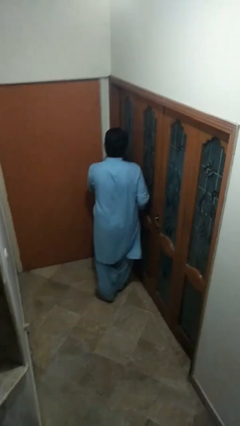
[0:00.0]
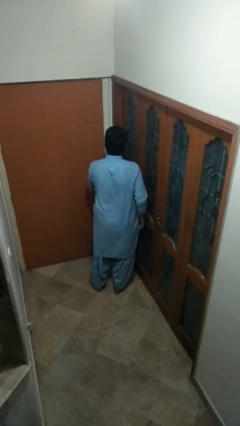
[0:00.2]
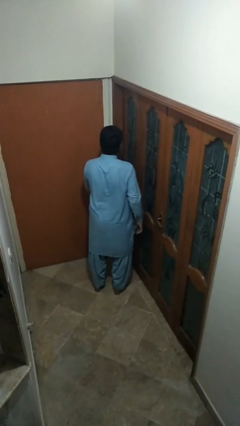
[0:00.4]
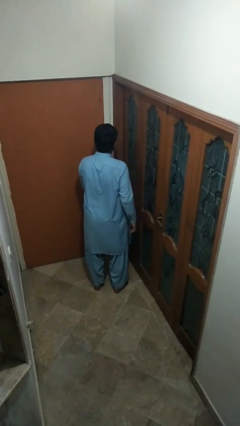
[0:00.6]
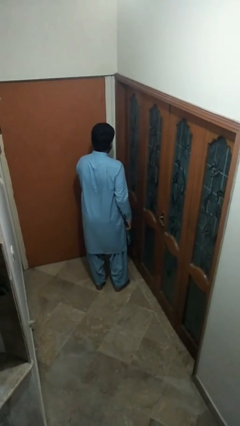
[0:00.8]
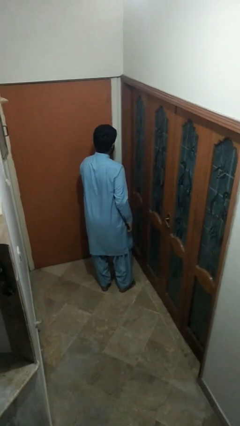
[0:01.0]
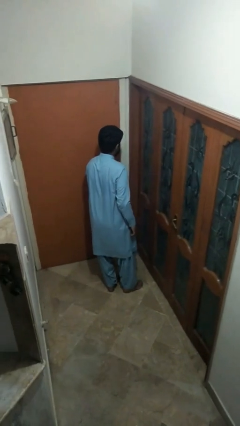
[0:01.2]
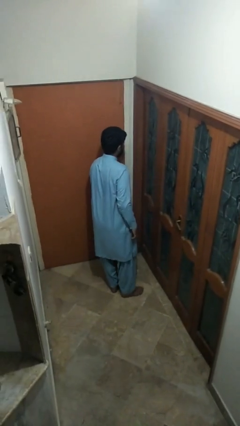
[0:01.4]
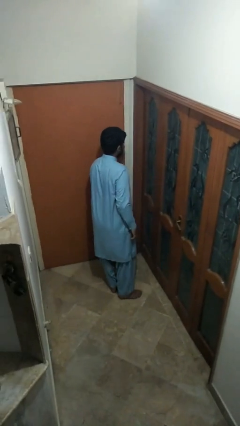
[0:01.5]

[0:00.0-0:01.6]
person opens facility door

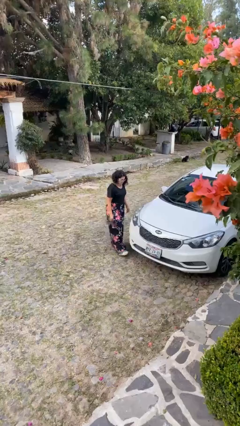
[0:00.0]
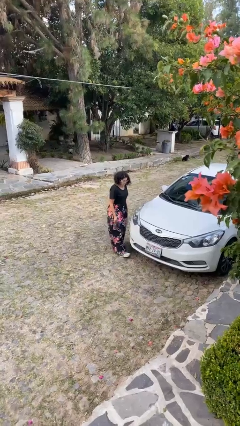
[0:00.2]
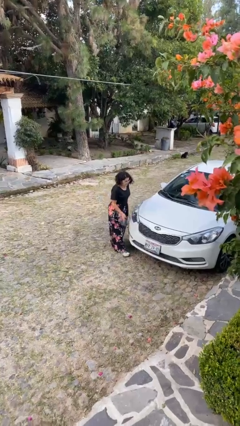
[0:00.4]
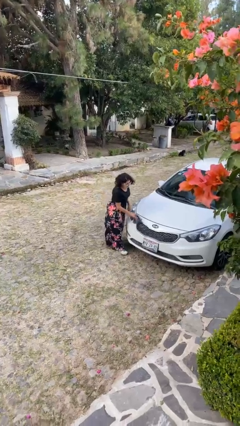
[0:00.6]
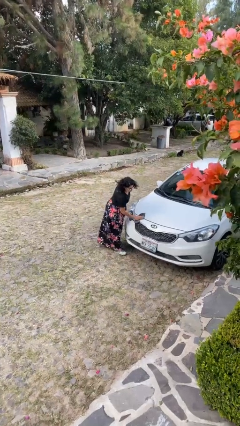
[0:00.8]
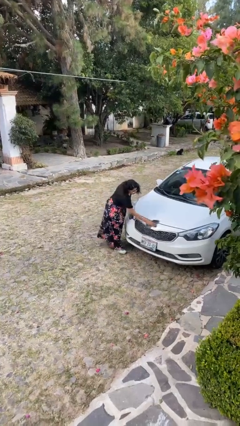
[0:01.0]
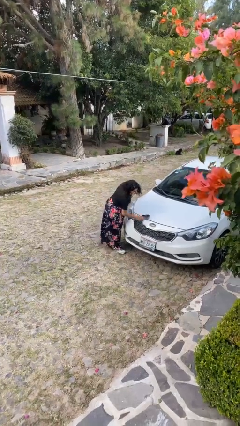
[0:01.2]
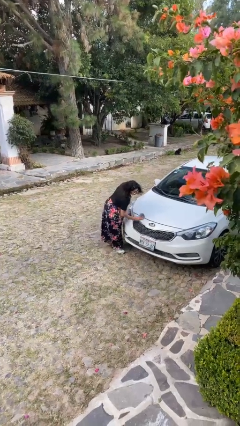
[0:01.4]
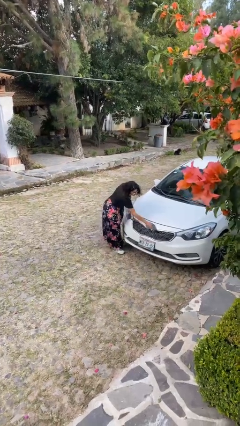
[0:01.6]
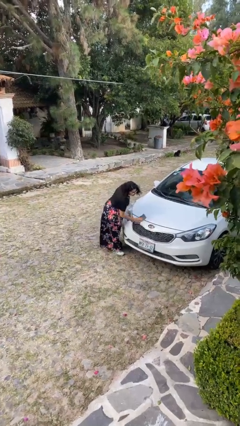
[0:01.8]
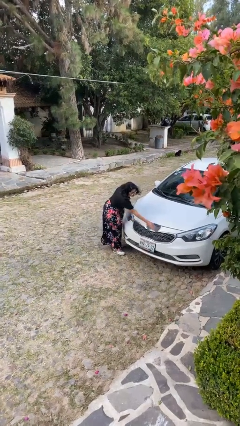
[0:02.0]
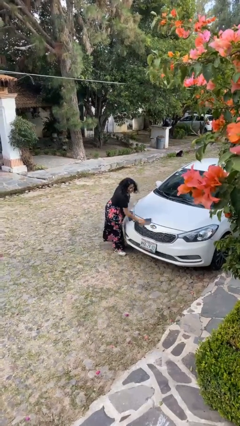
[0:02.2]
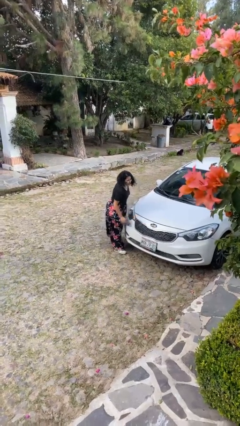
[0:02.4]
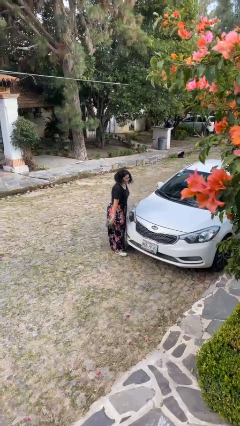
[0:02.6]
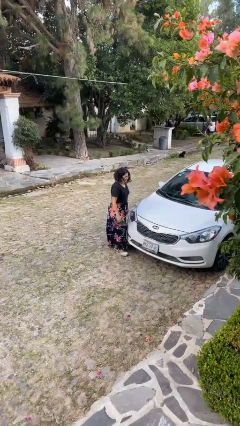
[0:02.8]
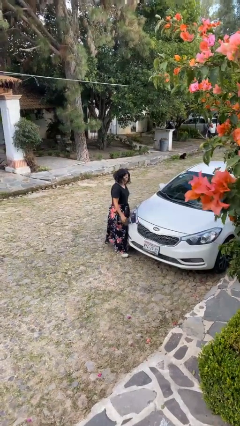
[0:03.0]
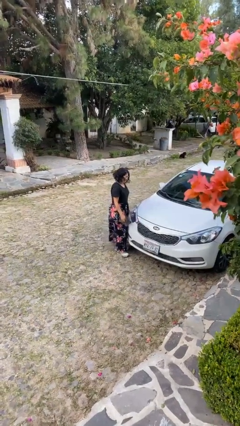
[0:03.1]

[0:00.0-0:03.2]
person polishes car with rag

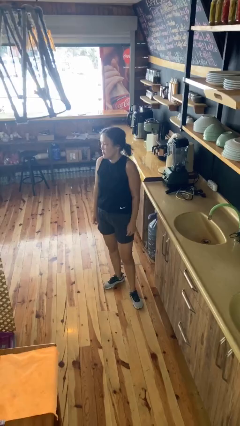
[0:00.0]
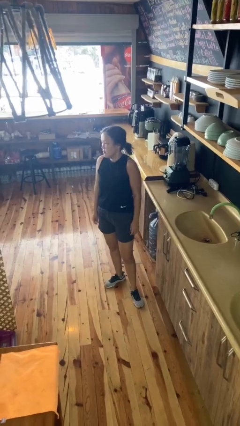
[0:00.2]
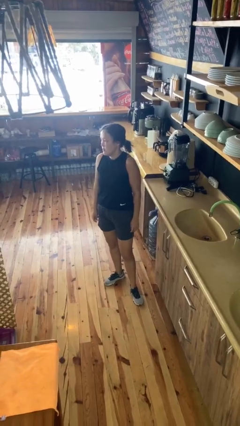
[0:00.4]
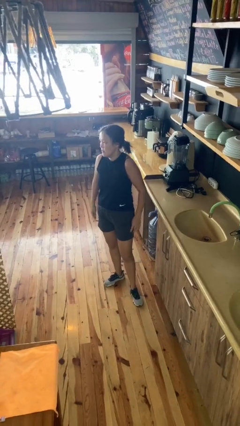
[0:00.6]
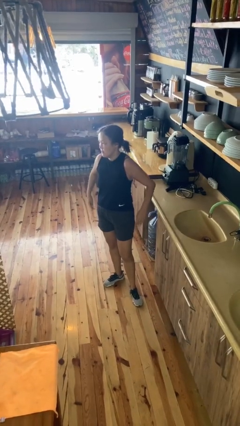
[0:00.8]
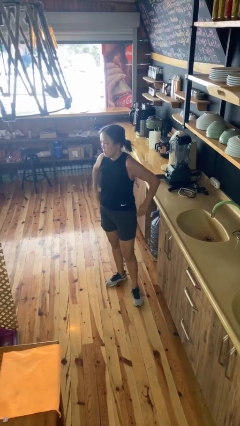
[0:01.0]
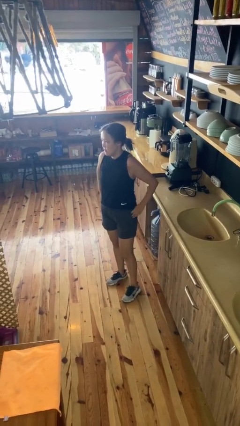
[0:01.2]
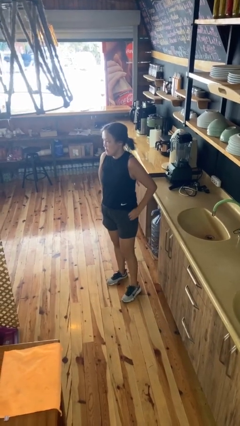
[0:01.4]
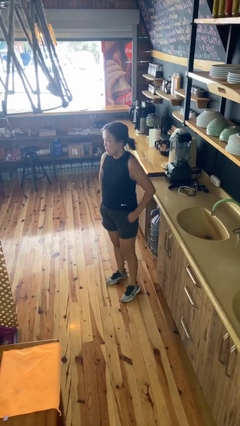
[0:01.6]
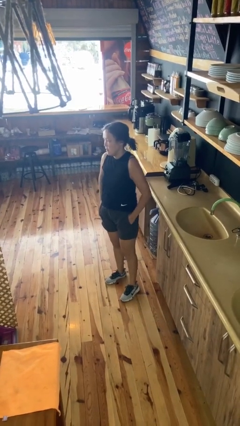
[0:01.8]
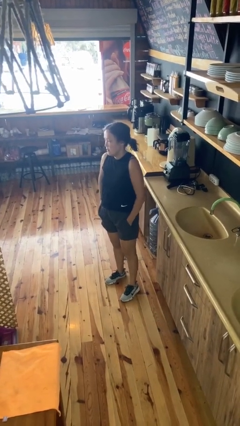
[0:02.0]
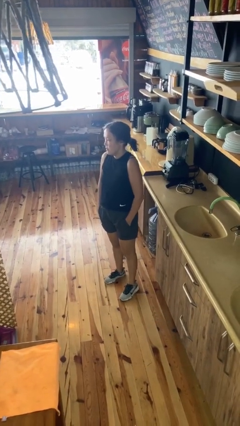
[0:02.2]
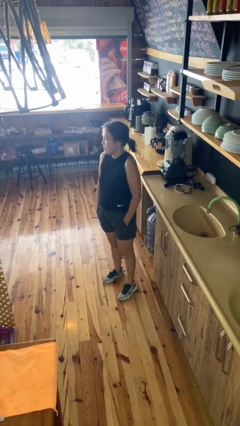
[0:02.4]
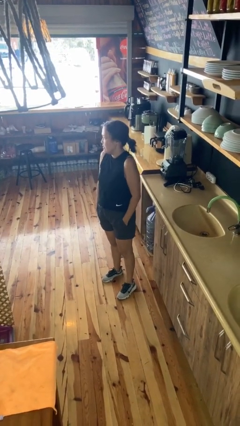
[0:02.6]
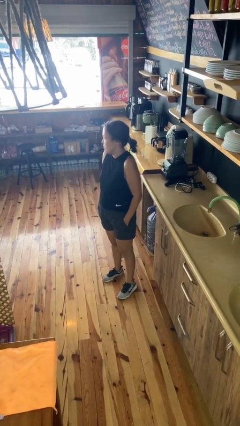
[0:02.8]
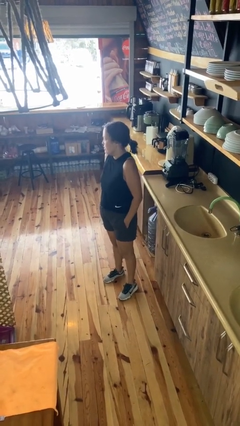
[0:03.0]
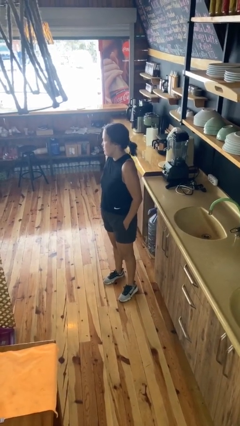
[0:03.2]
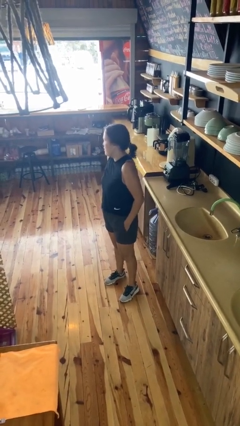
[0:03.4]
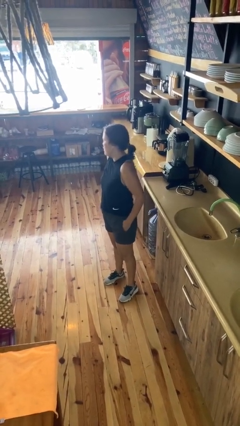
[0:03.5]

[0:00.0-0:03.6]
person puts hands in back pockets

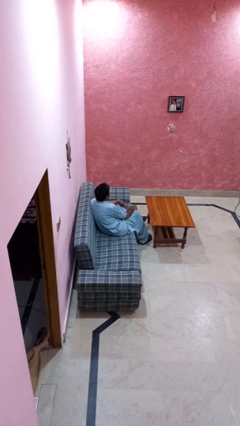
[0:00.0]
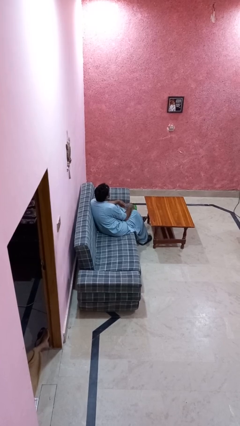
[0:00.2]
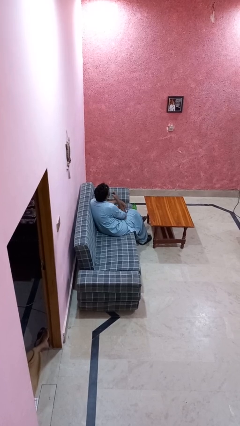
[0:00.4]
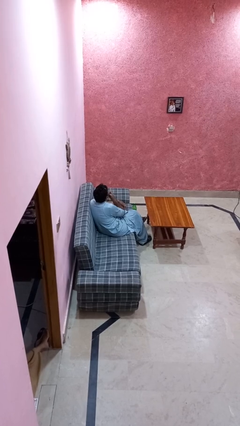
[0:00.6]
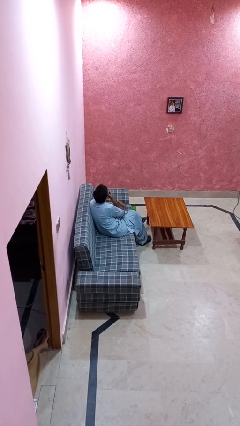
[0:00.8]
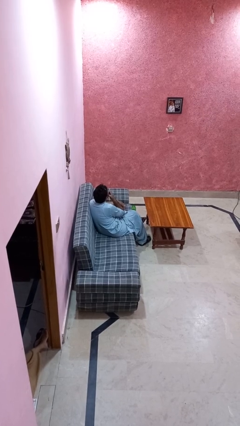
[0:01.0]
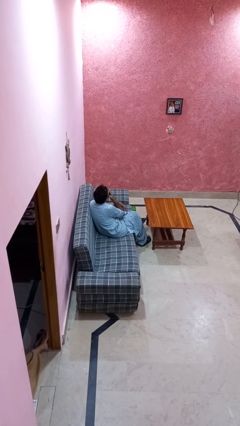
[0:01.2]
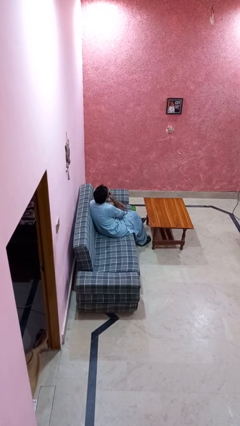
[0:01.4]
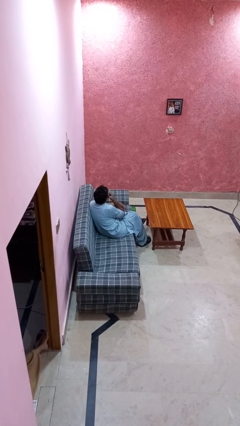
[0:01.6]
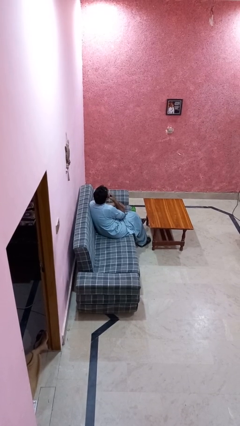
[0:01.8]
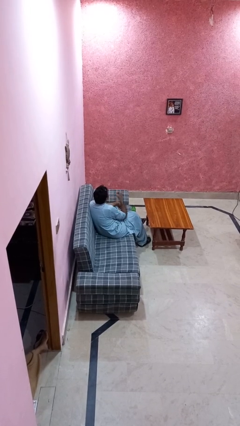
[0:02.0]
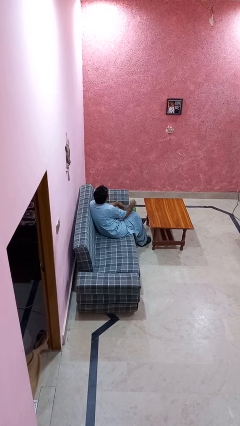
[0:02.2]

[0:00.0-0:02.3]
person strokes chin

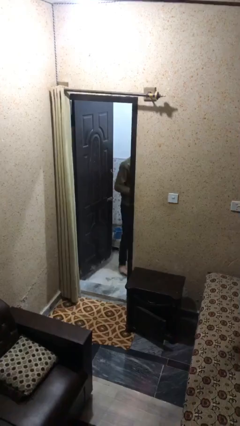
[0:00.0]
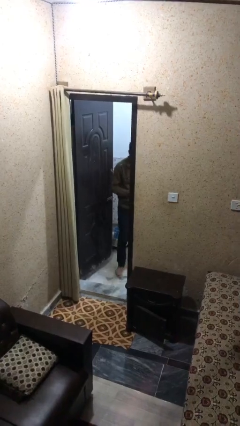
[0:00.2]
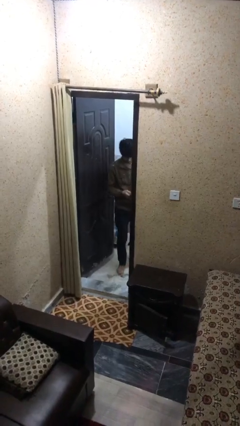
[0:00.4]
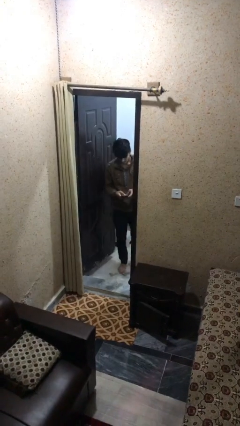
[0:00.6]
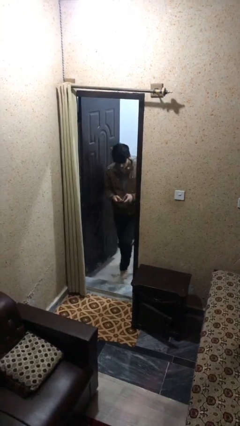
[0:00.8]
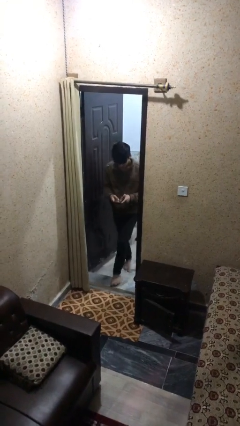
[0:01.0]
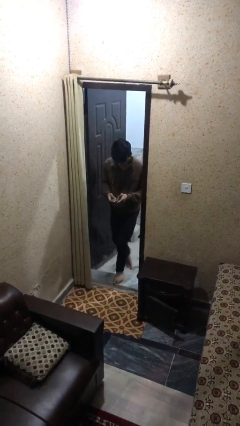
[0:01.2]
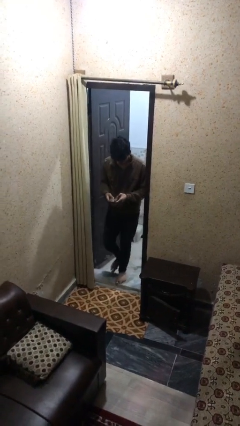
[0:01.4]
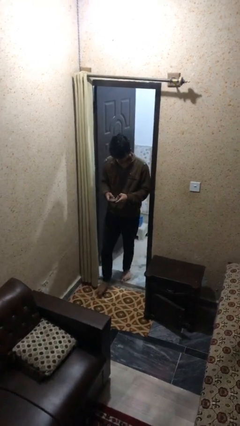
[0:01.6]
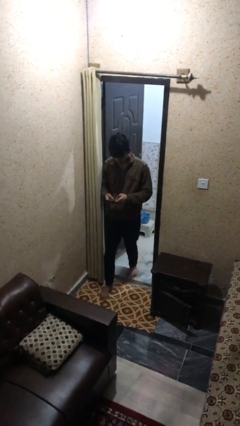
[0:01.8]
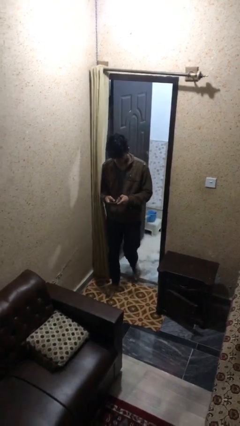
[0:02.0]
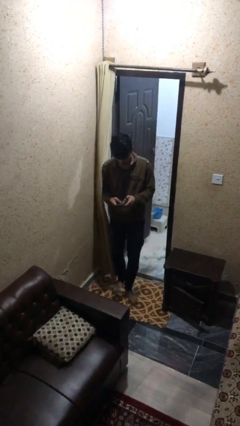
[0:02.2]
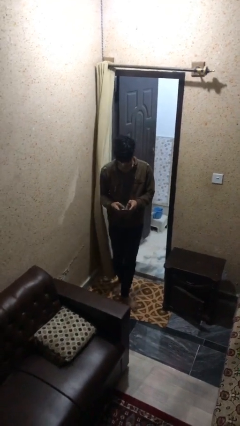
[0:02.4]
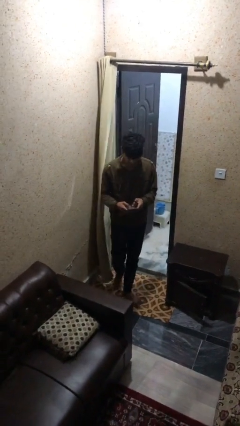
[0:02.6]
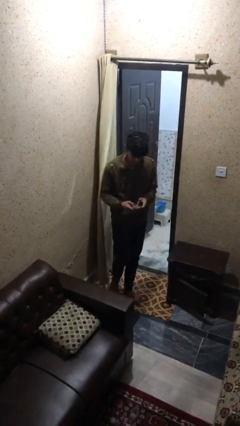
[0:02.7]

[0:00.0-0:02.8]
person exits scene through structure

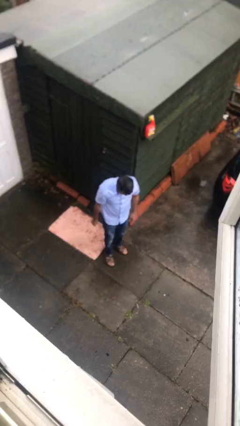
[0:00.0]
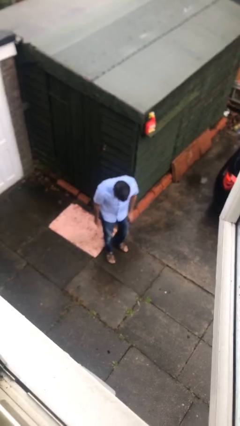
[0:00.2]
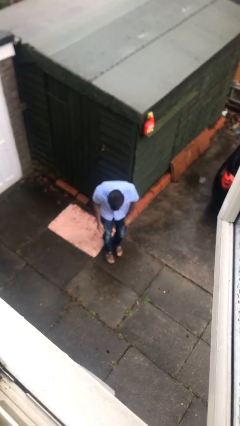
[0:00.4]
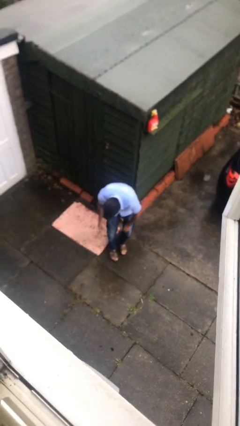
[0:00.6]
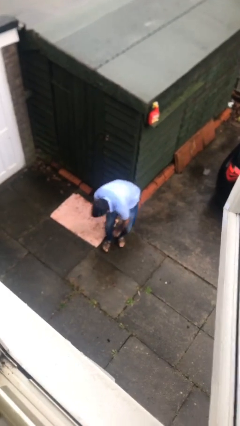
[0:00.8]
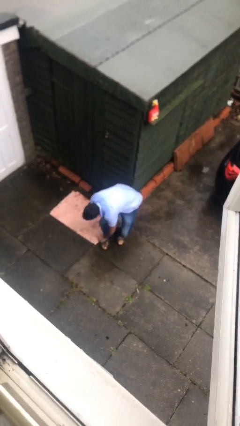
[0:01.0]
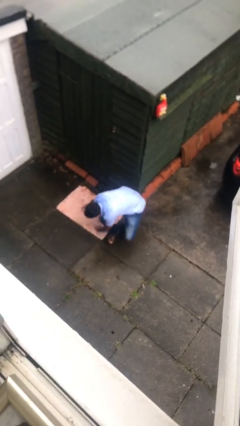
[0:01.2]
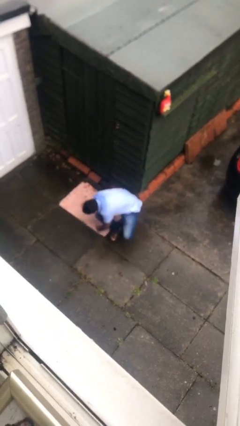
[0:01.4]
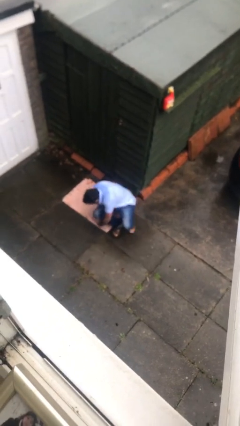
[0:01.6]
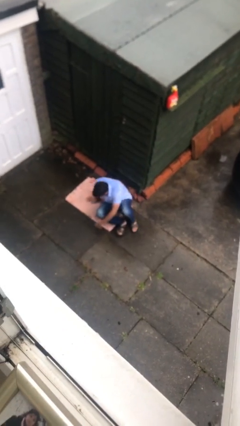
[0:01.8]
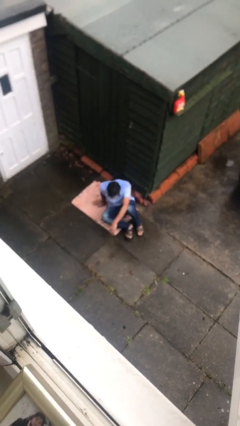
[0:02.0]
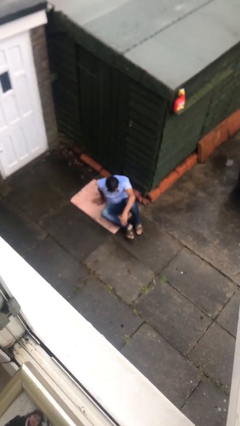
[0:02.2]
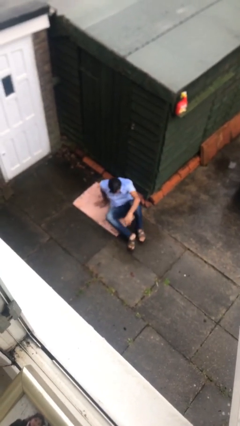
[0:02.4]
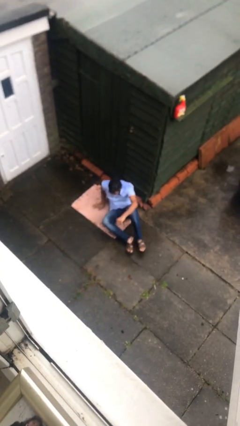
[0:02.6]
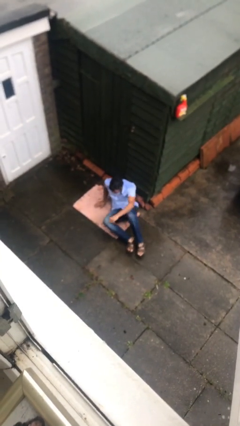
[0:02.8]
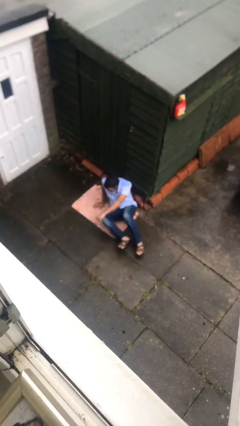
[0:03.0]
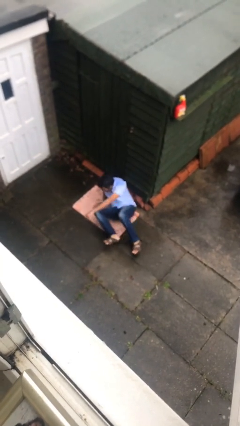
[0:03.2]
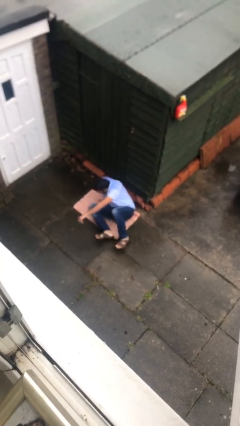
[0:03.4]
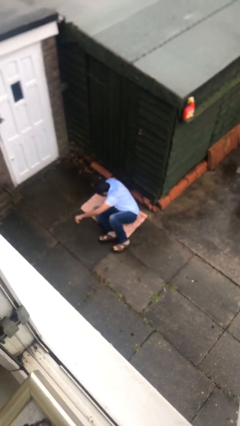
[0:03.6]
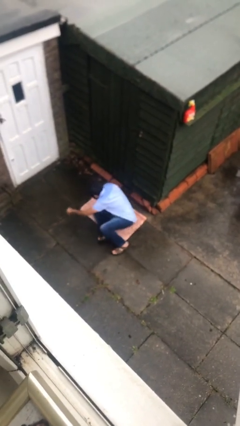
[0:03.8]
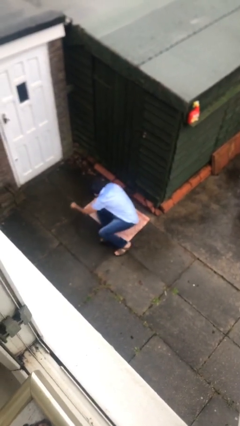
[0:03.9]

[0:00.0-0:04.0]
person sits down

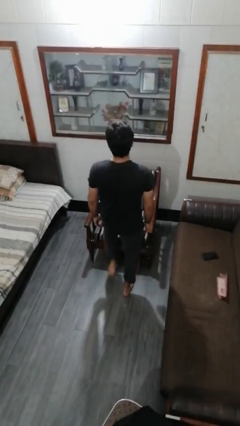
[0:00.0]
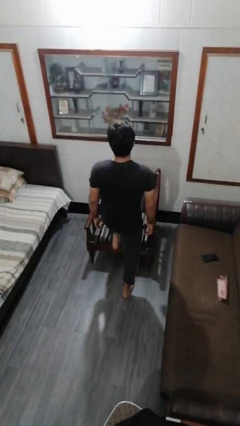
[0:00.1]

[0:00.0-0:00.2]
person climbs on chair
